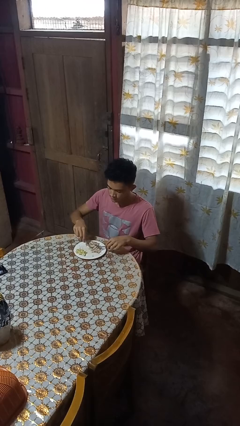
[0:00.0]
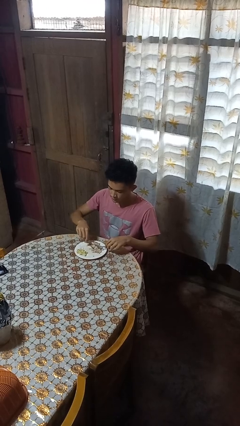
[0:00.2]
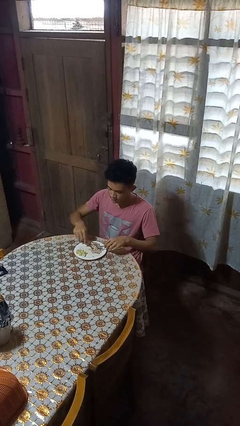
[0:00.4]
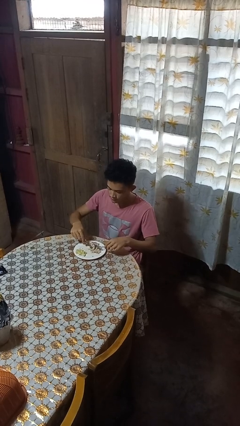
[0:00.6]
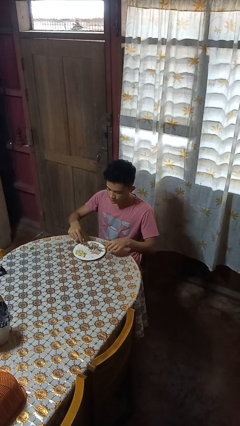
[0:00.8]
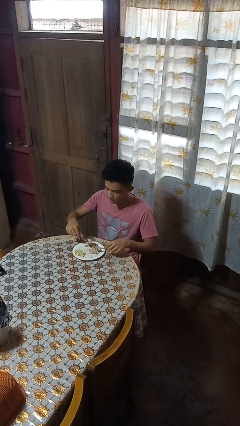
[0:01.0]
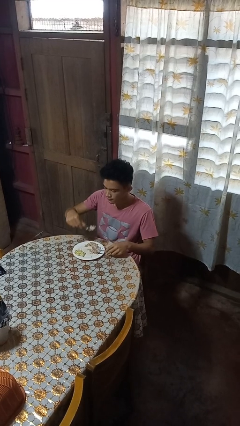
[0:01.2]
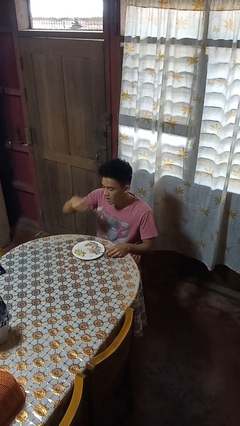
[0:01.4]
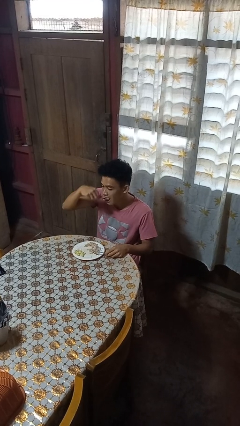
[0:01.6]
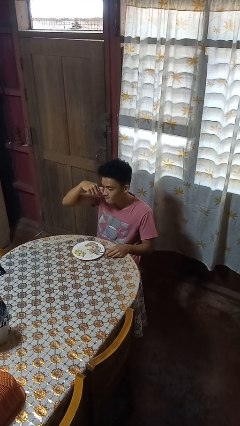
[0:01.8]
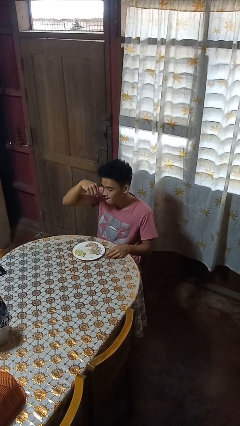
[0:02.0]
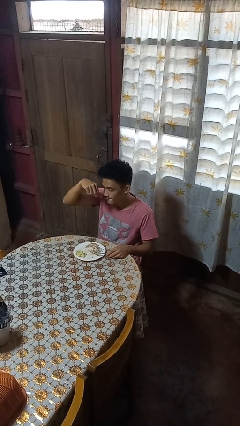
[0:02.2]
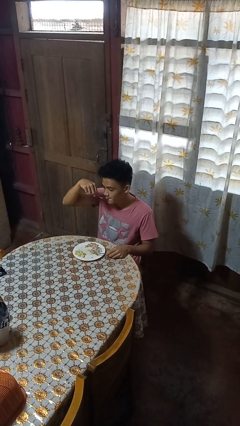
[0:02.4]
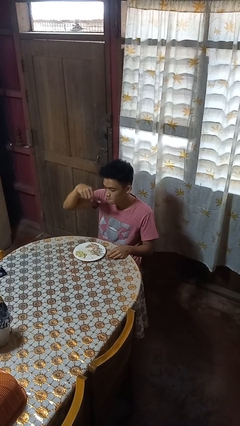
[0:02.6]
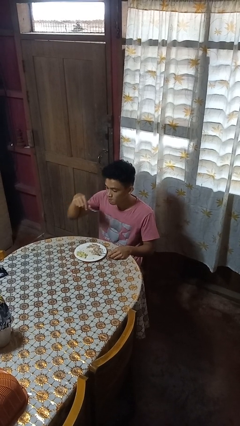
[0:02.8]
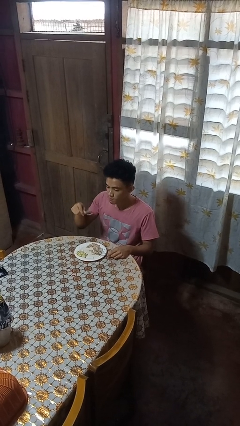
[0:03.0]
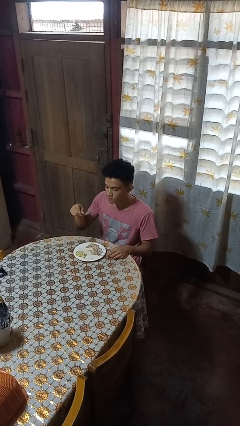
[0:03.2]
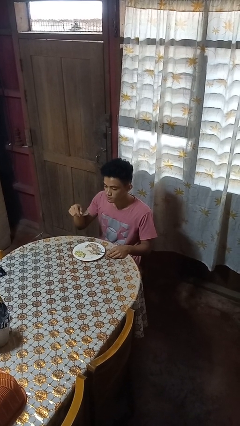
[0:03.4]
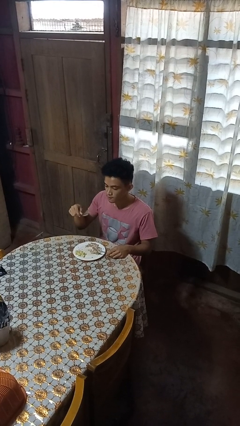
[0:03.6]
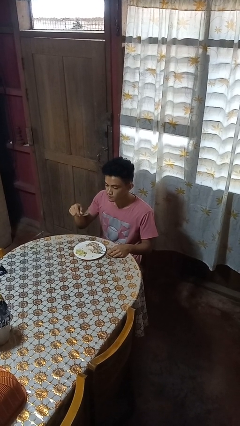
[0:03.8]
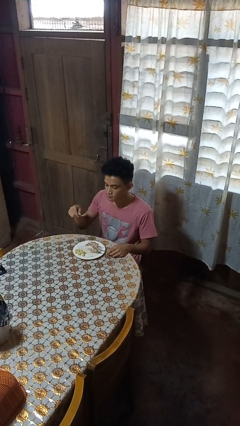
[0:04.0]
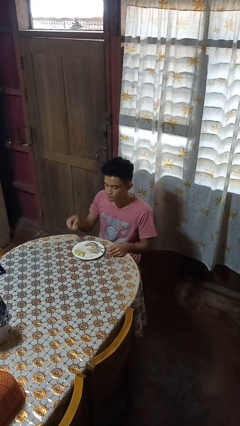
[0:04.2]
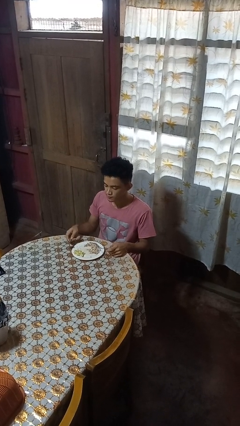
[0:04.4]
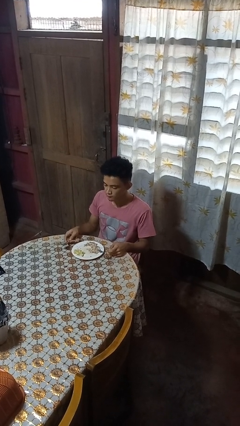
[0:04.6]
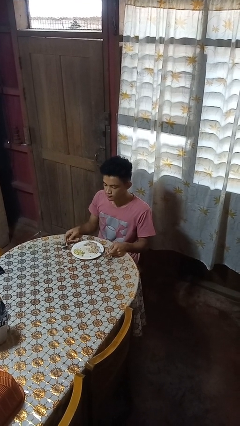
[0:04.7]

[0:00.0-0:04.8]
person eats with utensil

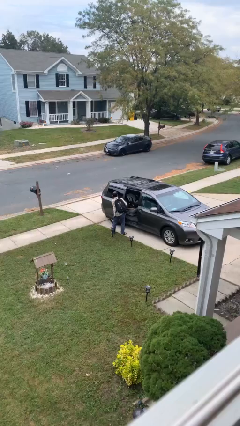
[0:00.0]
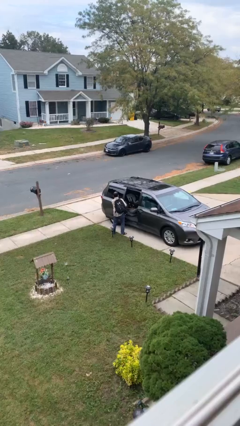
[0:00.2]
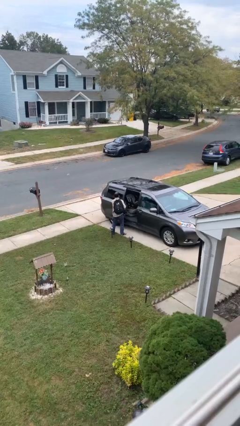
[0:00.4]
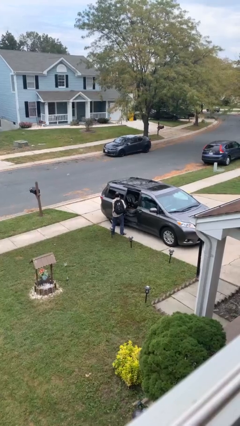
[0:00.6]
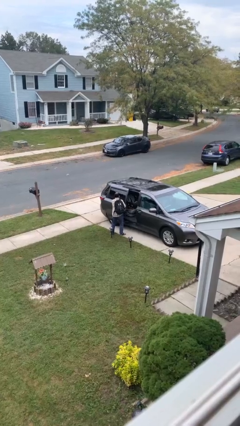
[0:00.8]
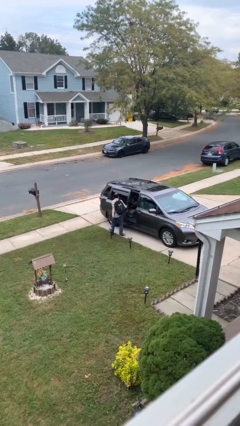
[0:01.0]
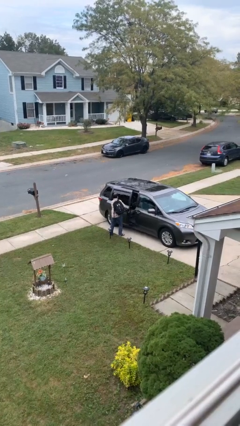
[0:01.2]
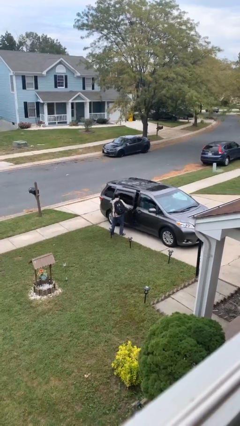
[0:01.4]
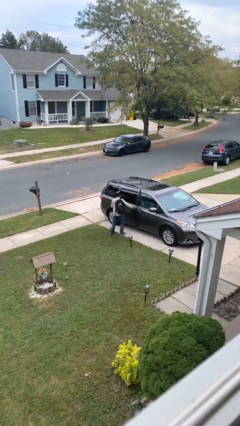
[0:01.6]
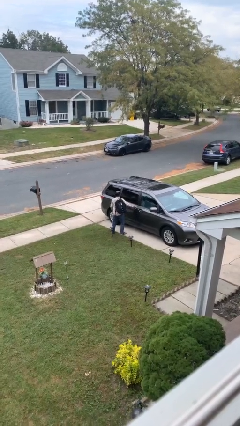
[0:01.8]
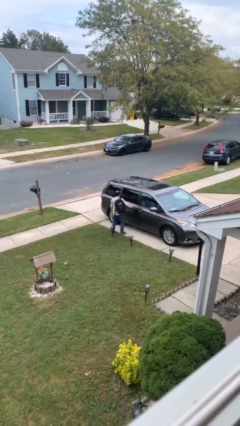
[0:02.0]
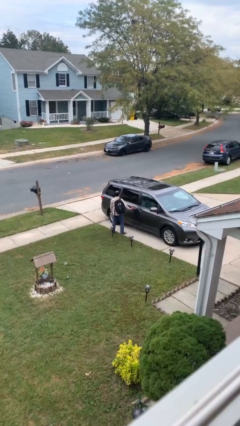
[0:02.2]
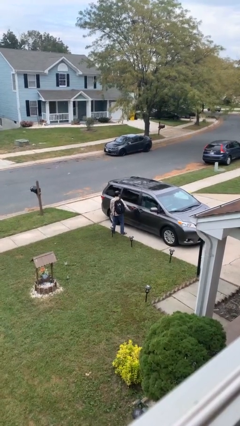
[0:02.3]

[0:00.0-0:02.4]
person closes car door

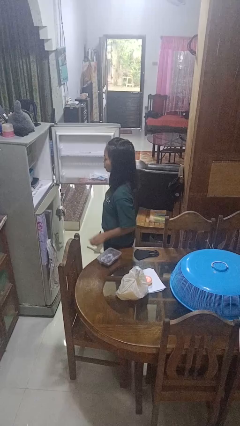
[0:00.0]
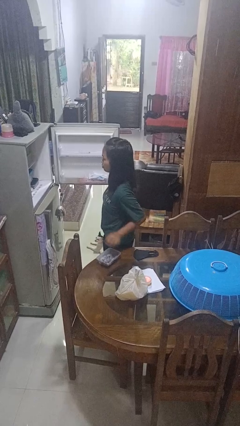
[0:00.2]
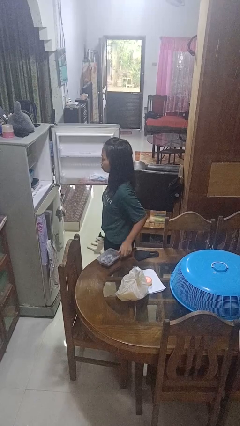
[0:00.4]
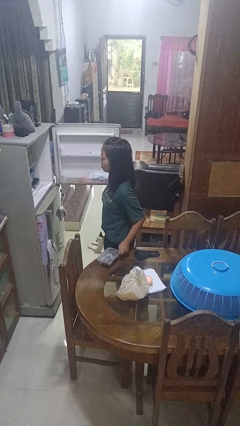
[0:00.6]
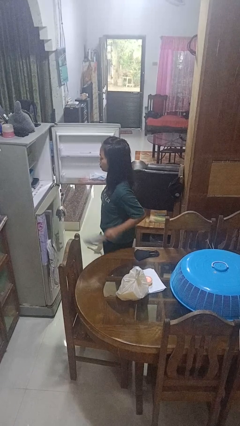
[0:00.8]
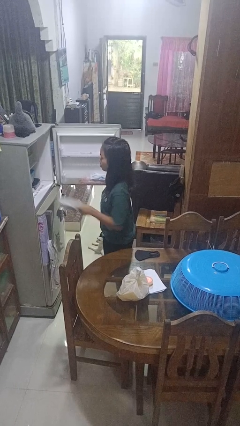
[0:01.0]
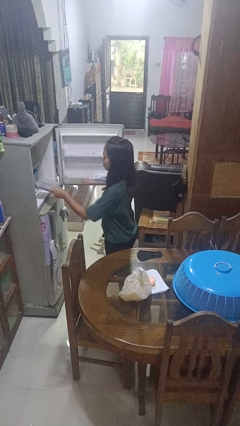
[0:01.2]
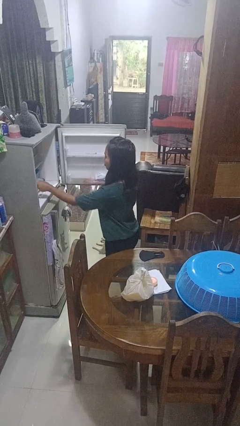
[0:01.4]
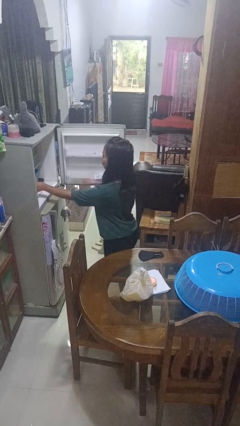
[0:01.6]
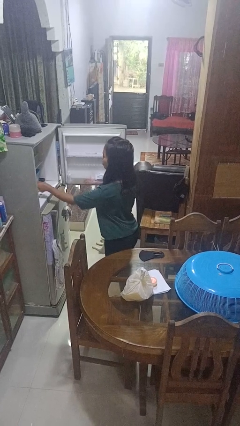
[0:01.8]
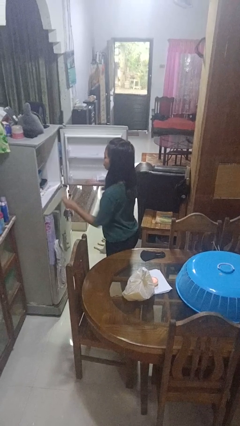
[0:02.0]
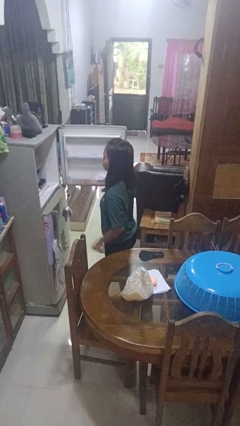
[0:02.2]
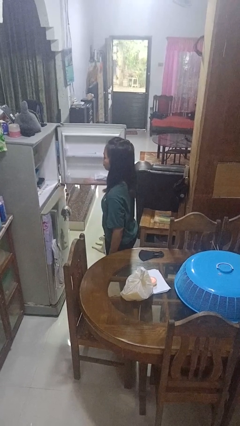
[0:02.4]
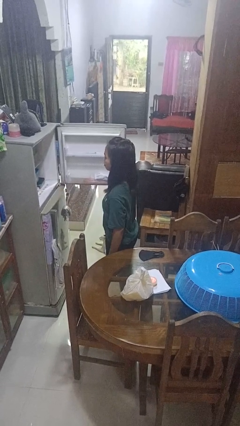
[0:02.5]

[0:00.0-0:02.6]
person puts object into refrigerator

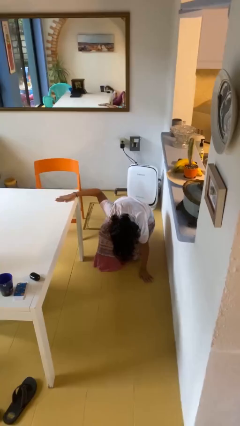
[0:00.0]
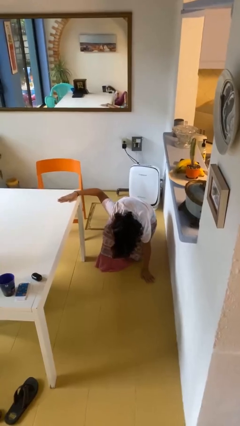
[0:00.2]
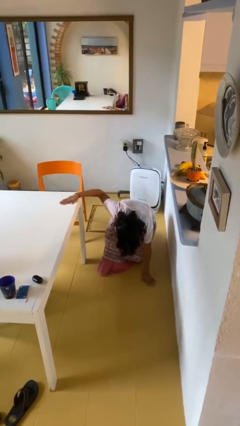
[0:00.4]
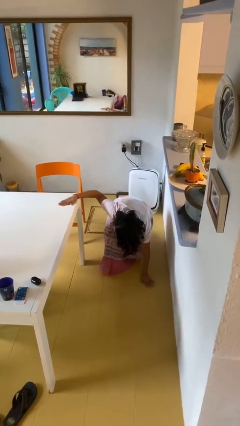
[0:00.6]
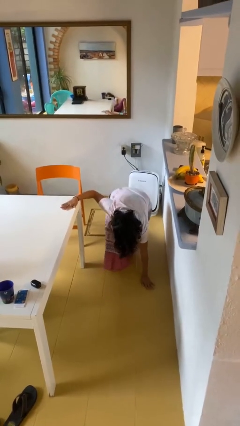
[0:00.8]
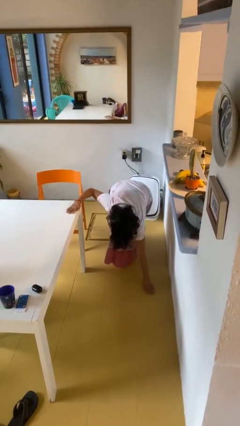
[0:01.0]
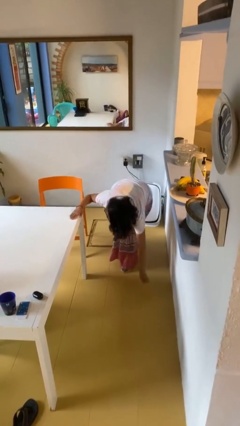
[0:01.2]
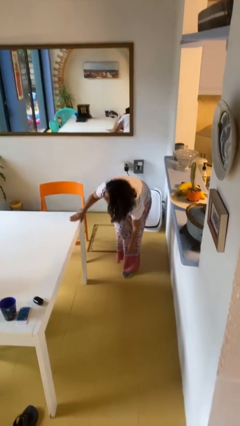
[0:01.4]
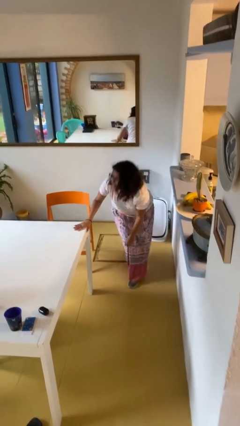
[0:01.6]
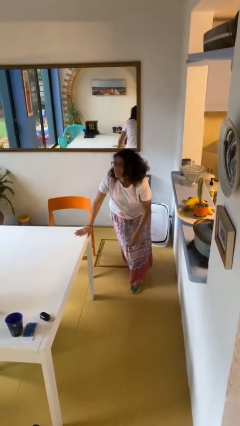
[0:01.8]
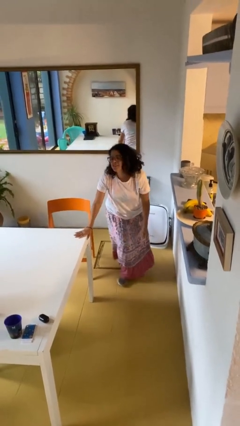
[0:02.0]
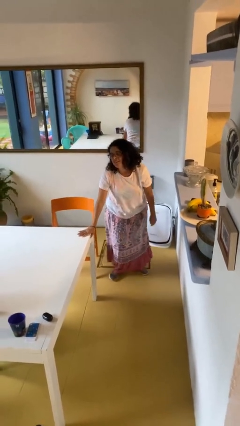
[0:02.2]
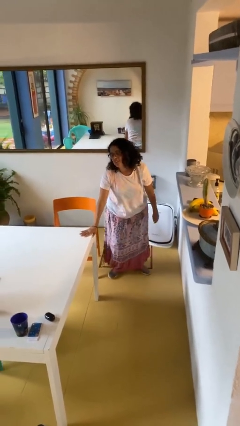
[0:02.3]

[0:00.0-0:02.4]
person stands up from floor

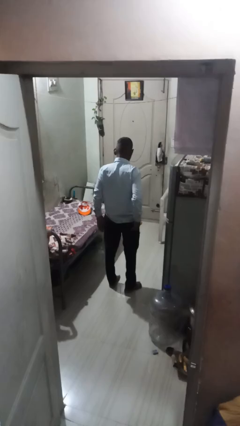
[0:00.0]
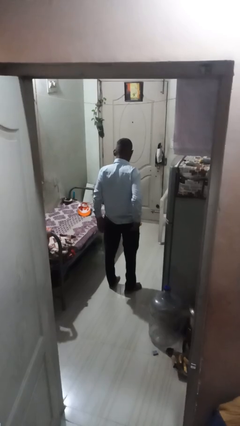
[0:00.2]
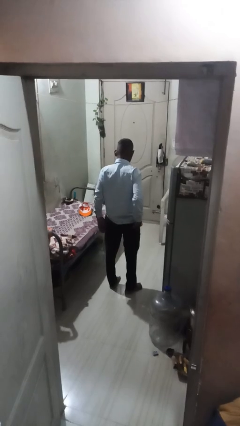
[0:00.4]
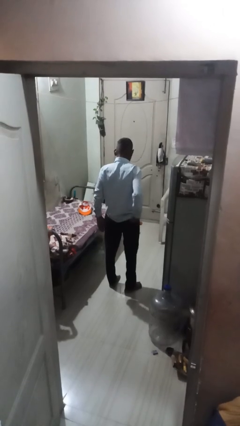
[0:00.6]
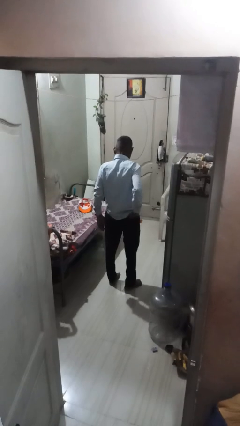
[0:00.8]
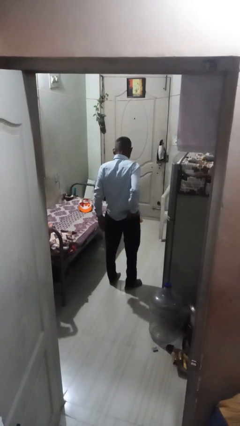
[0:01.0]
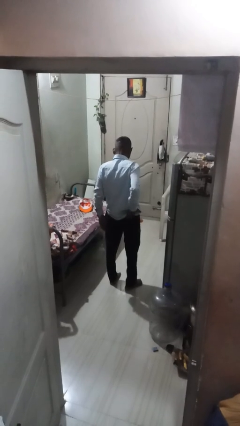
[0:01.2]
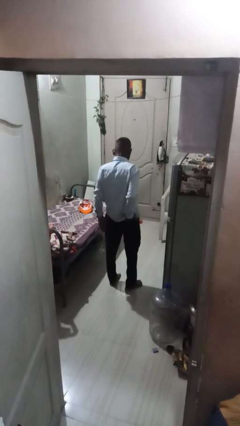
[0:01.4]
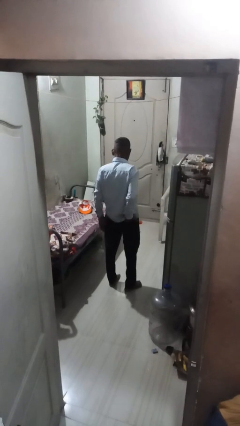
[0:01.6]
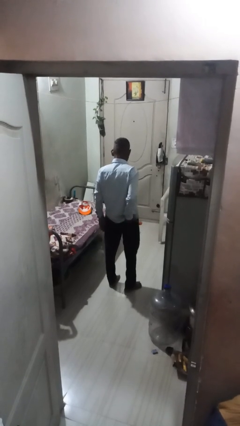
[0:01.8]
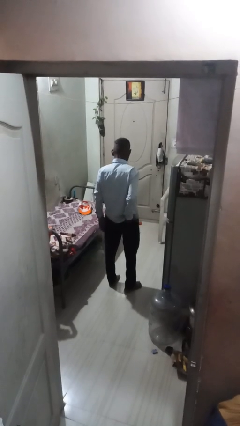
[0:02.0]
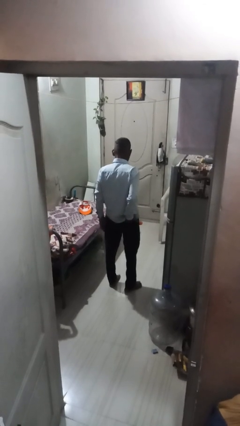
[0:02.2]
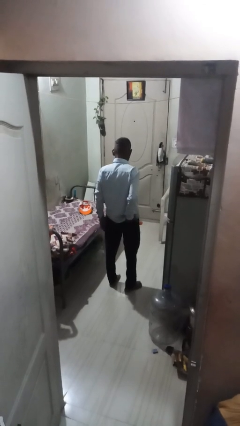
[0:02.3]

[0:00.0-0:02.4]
person puts hands in back pockets

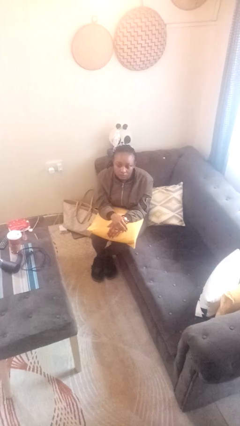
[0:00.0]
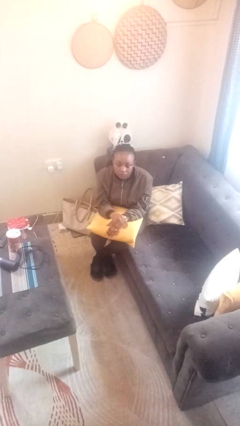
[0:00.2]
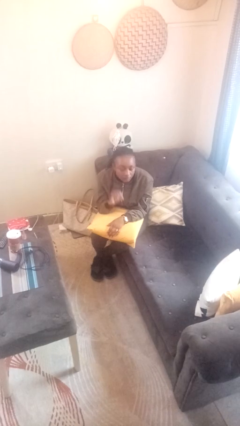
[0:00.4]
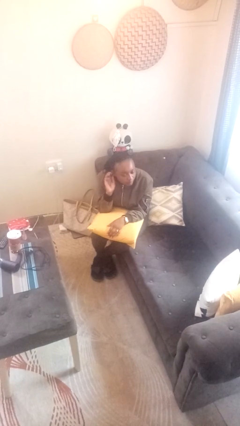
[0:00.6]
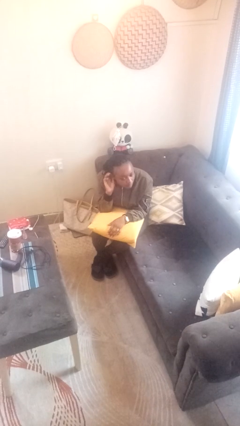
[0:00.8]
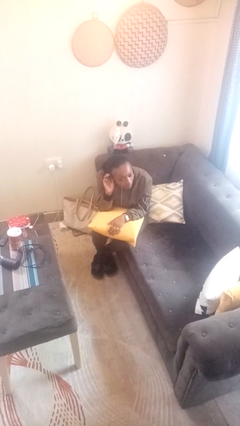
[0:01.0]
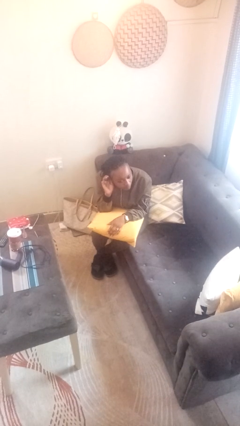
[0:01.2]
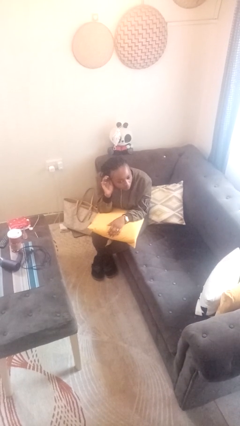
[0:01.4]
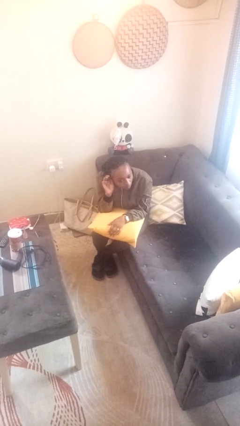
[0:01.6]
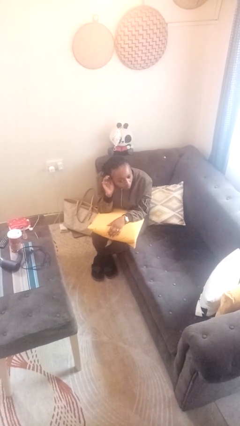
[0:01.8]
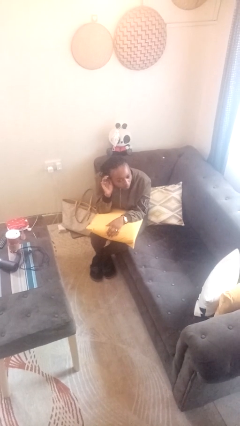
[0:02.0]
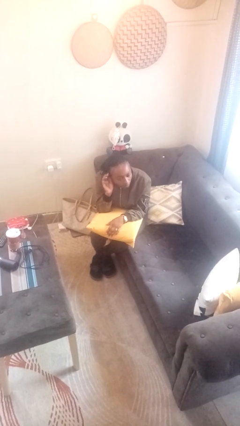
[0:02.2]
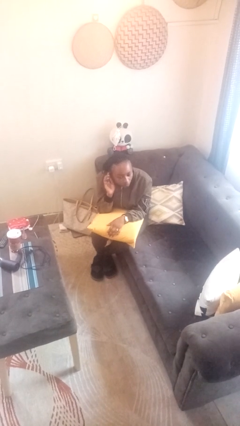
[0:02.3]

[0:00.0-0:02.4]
person gestures listen closely
